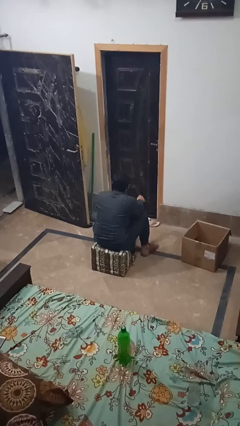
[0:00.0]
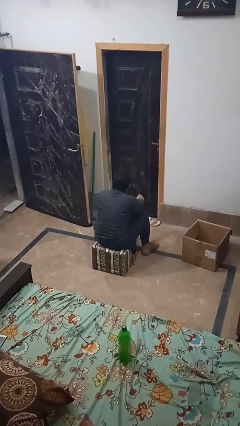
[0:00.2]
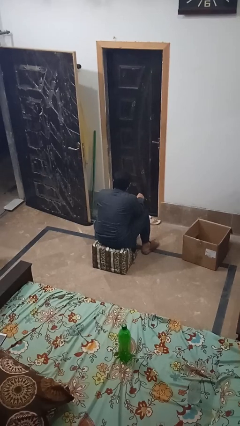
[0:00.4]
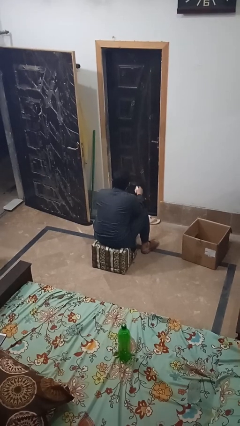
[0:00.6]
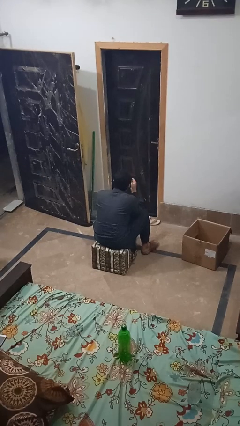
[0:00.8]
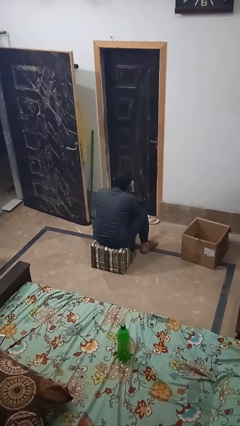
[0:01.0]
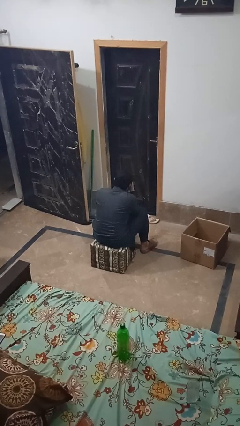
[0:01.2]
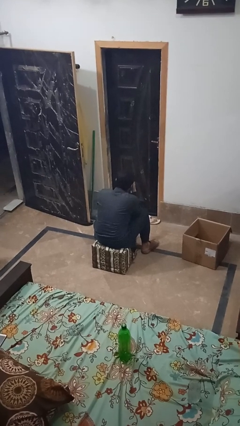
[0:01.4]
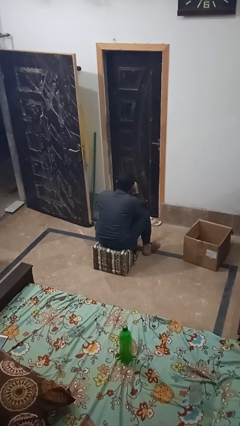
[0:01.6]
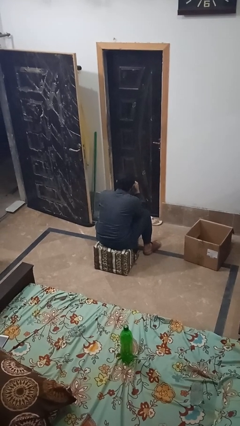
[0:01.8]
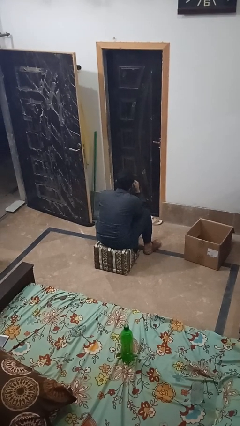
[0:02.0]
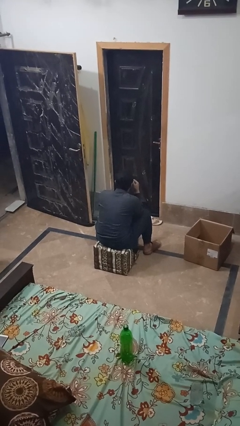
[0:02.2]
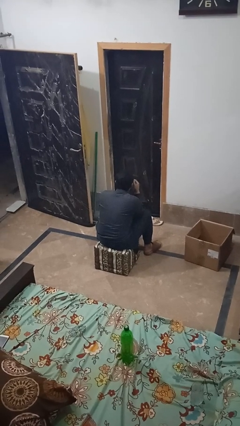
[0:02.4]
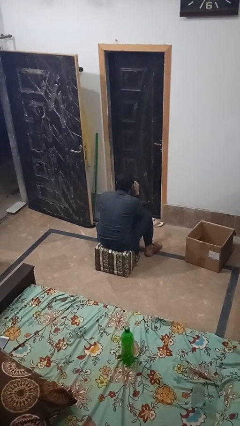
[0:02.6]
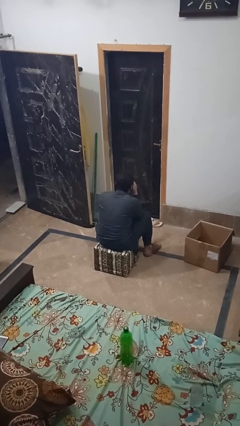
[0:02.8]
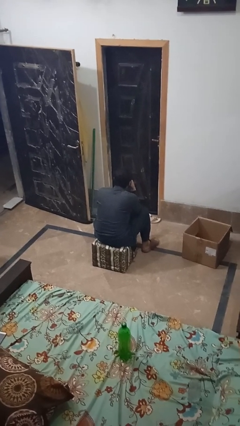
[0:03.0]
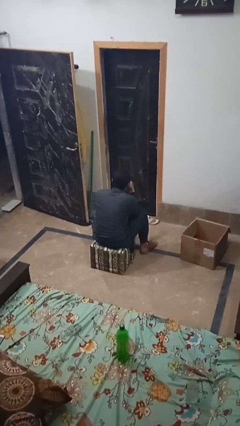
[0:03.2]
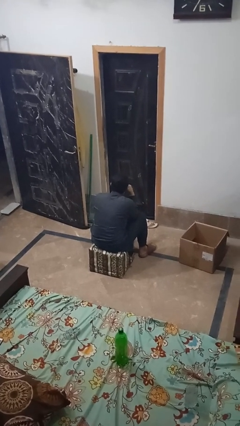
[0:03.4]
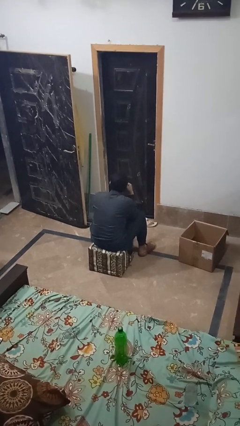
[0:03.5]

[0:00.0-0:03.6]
person blows nose

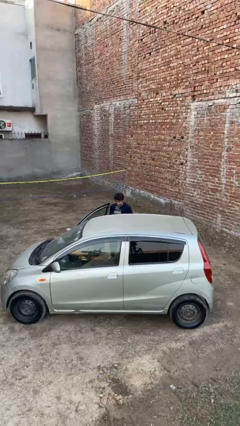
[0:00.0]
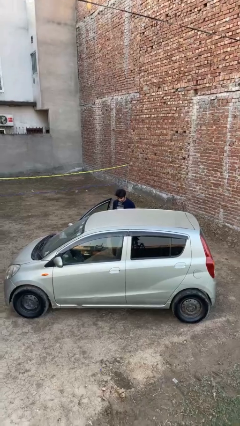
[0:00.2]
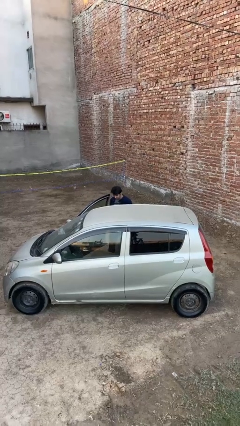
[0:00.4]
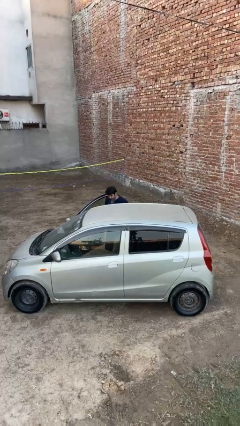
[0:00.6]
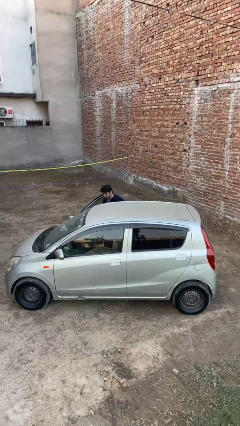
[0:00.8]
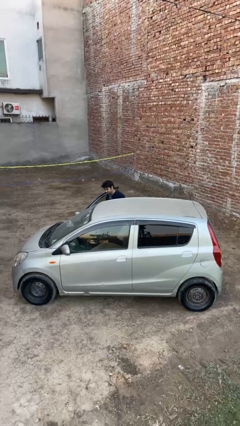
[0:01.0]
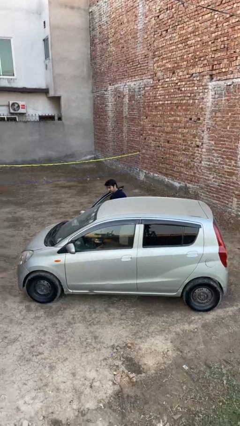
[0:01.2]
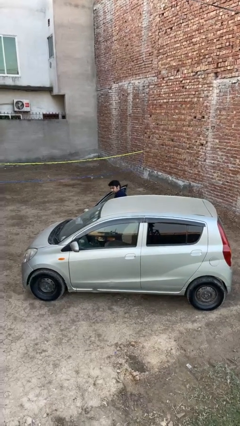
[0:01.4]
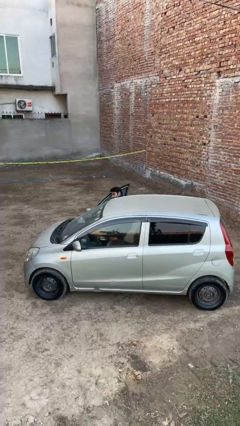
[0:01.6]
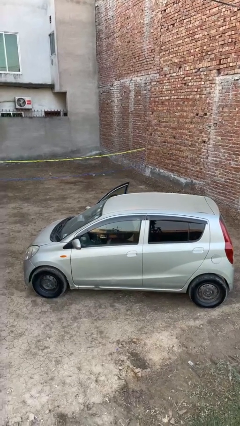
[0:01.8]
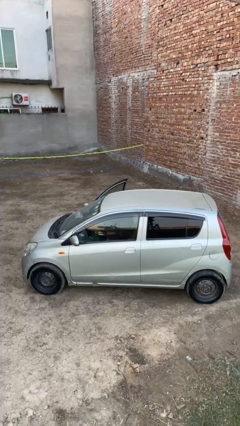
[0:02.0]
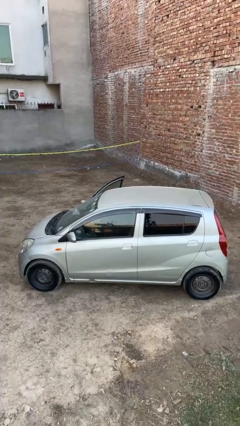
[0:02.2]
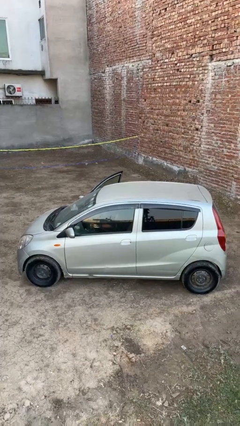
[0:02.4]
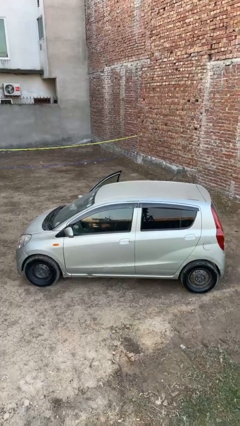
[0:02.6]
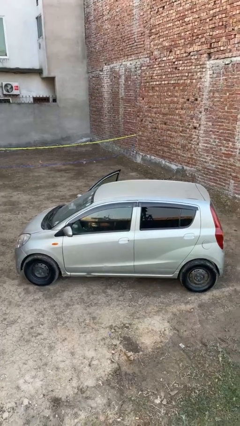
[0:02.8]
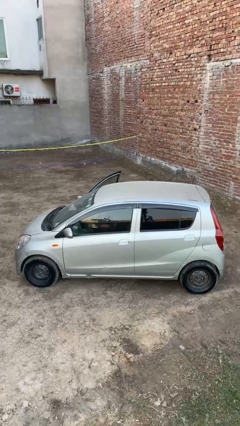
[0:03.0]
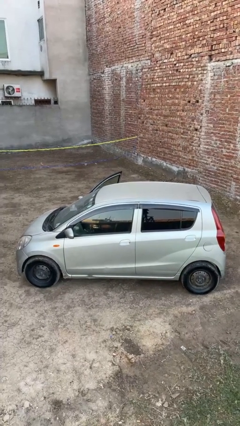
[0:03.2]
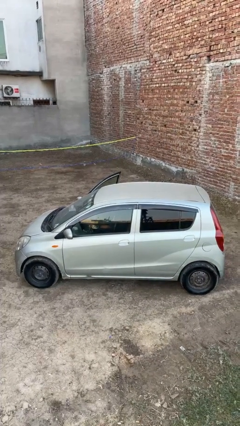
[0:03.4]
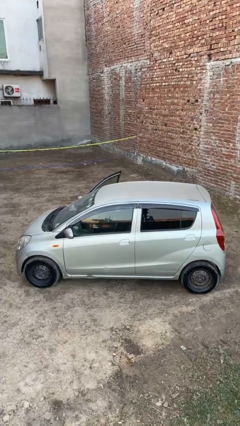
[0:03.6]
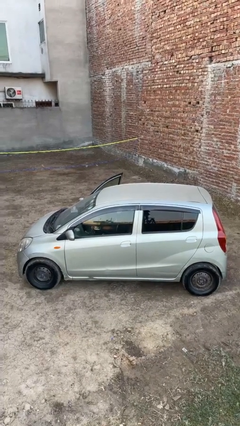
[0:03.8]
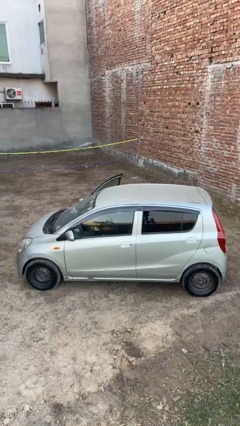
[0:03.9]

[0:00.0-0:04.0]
person enters car

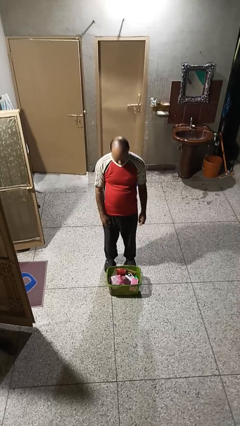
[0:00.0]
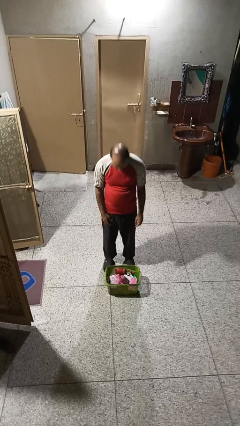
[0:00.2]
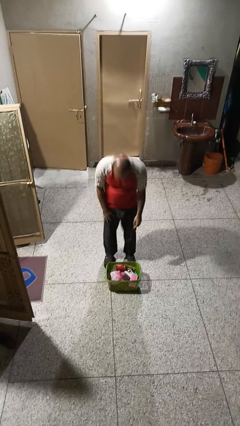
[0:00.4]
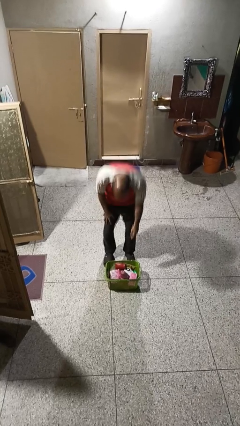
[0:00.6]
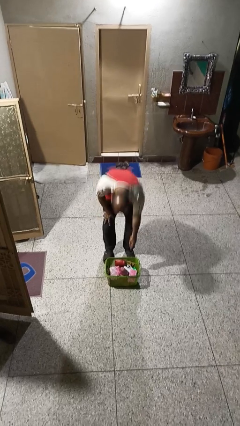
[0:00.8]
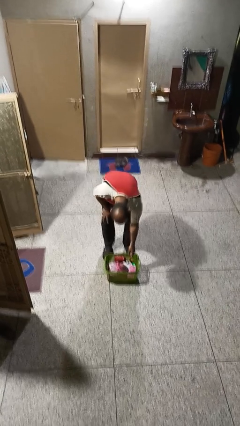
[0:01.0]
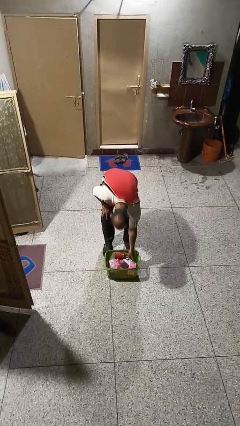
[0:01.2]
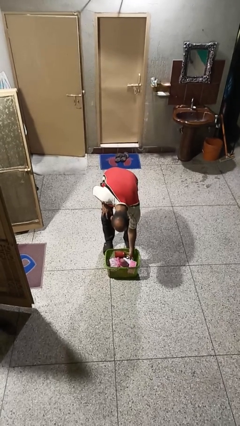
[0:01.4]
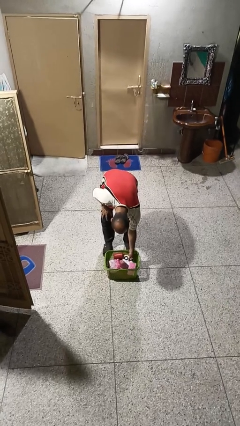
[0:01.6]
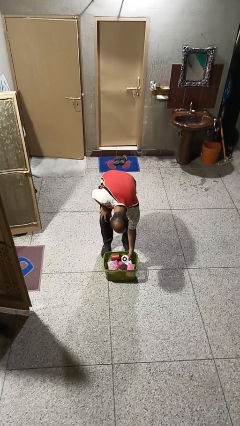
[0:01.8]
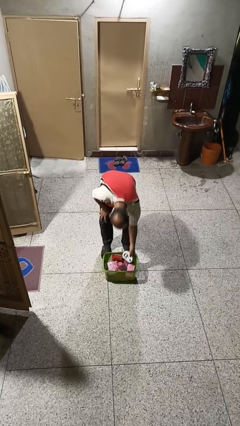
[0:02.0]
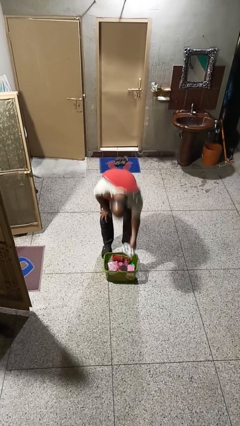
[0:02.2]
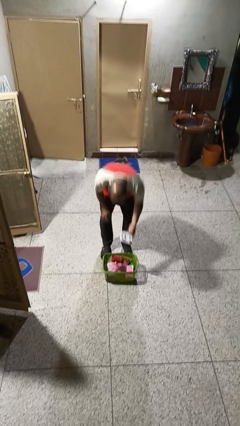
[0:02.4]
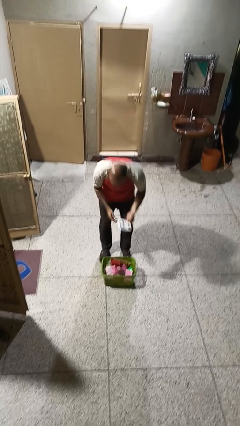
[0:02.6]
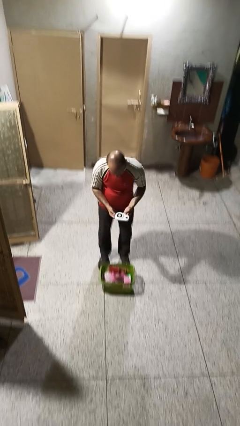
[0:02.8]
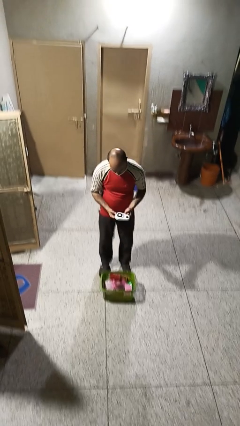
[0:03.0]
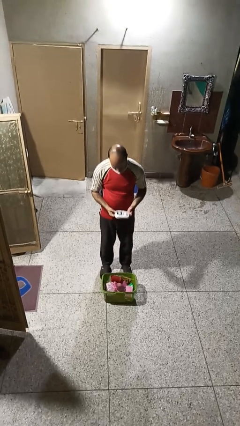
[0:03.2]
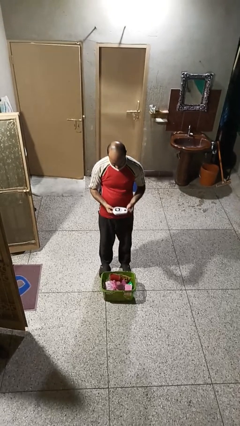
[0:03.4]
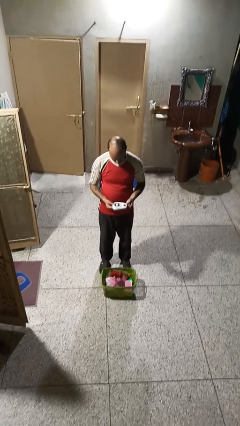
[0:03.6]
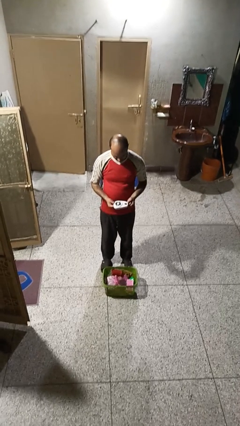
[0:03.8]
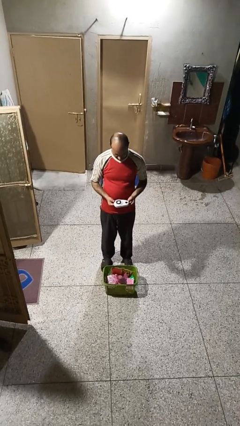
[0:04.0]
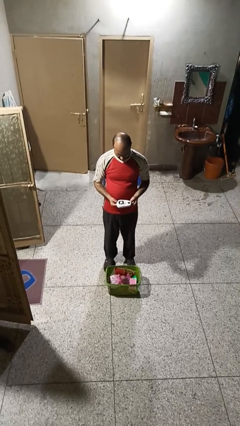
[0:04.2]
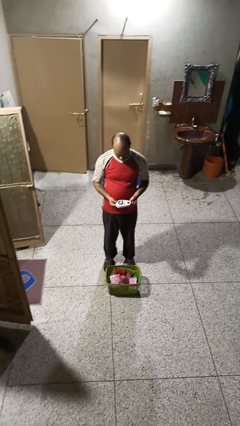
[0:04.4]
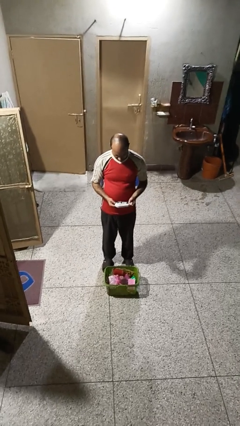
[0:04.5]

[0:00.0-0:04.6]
person takes object from basket

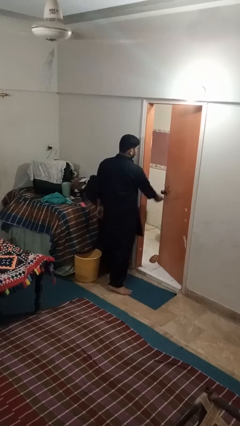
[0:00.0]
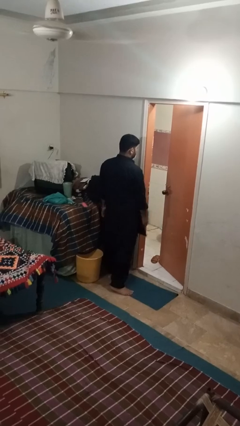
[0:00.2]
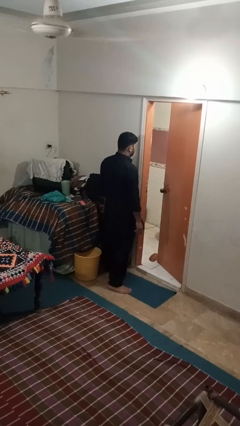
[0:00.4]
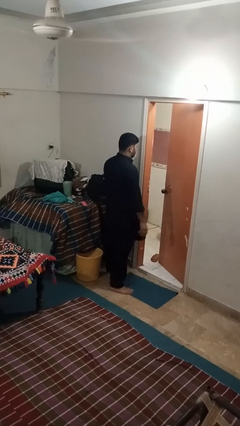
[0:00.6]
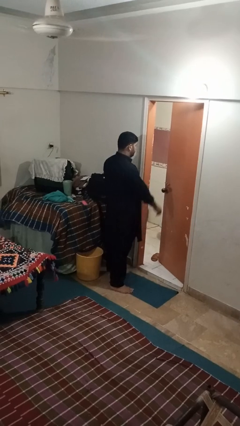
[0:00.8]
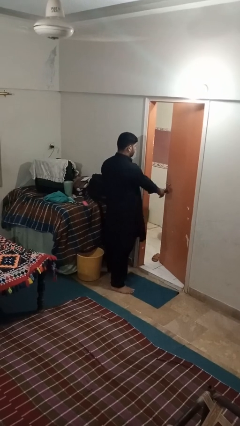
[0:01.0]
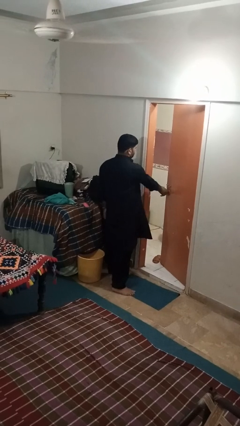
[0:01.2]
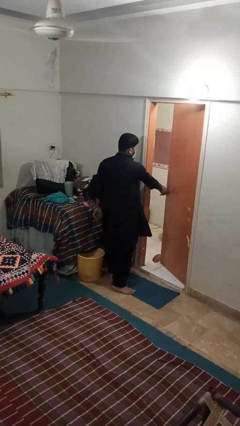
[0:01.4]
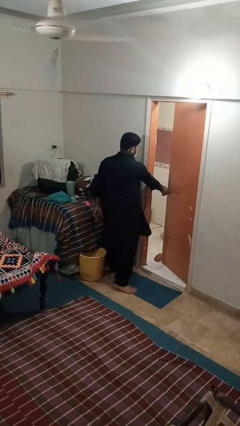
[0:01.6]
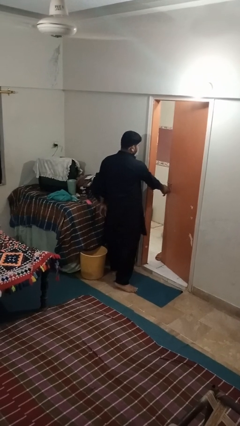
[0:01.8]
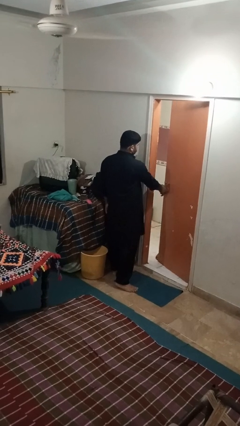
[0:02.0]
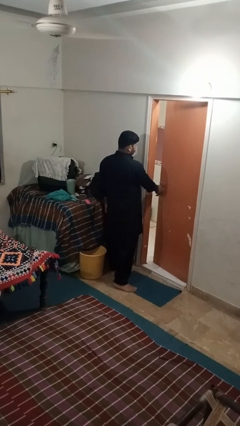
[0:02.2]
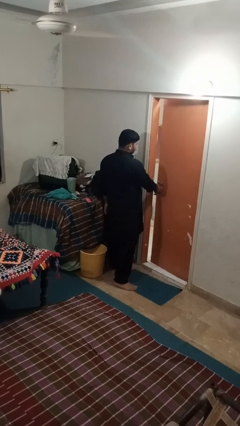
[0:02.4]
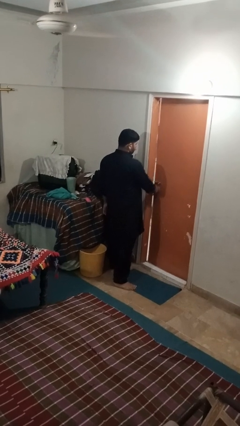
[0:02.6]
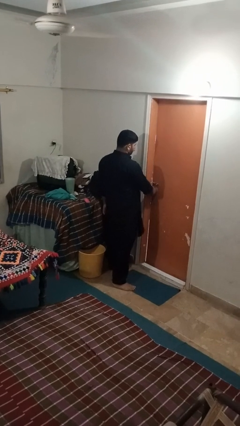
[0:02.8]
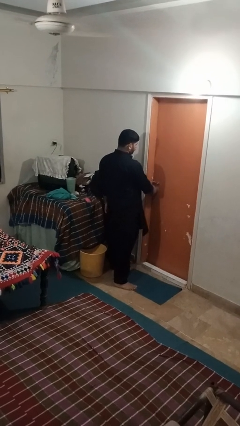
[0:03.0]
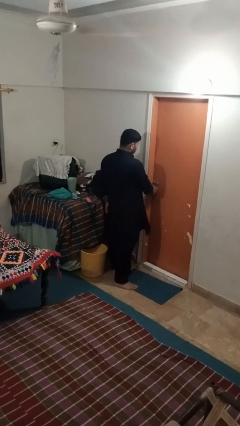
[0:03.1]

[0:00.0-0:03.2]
person closes facility door

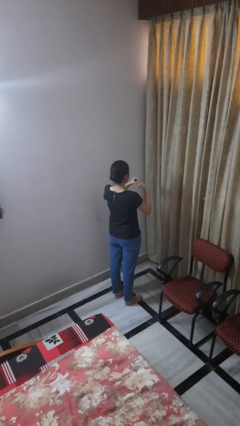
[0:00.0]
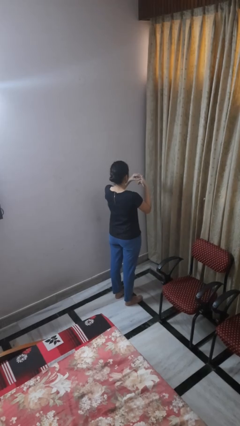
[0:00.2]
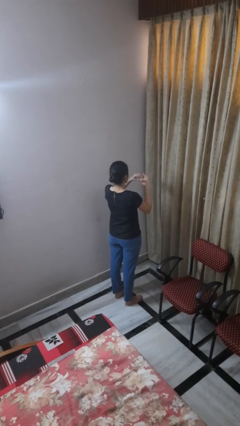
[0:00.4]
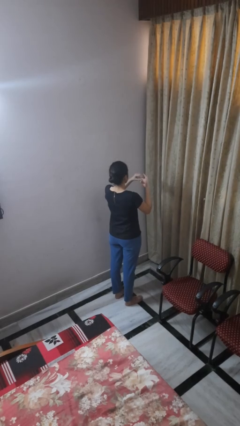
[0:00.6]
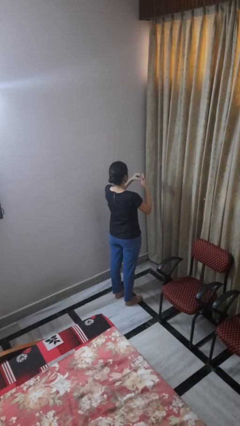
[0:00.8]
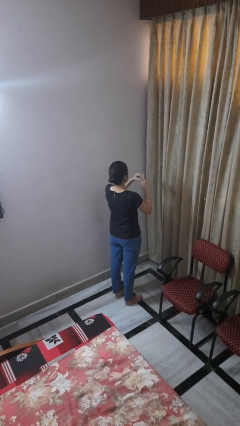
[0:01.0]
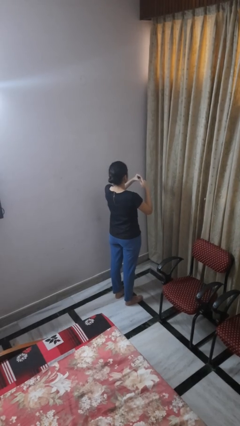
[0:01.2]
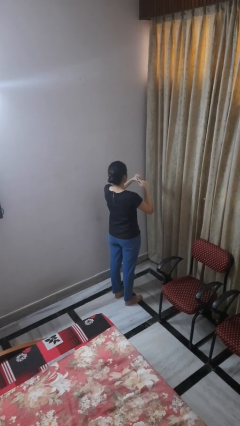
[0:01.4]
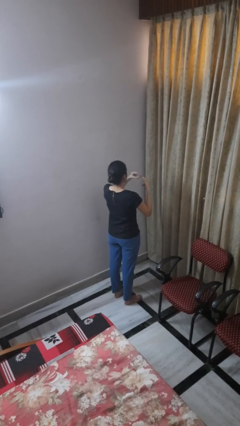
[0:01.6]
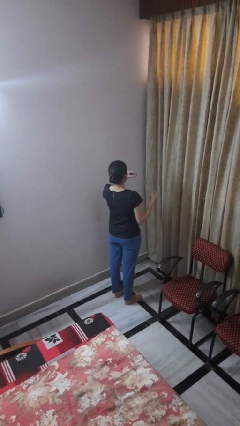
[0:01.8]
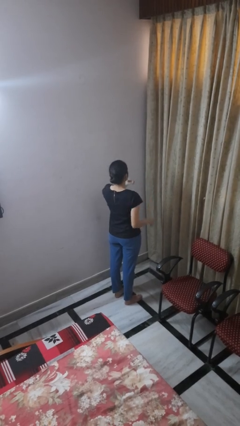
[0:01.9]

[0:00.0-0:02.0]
person takes off ring
